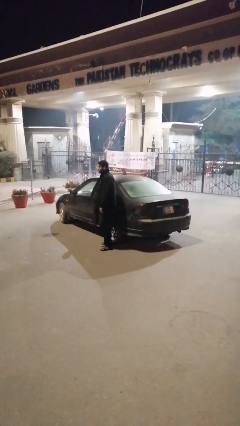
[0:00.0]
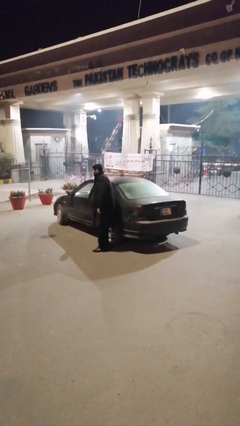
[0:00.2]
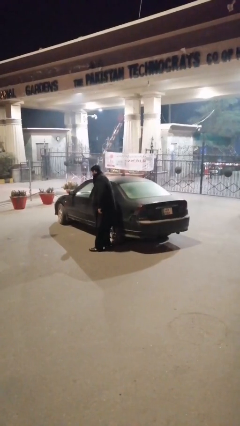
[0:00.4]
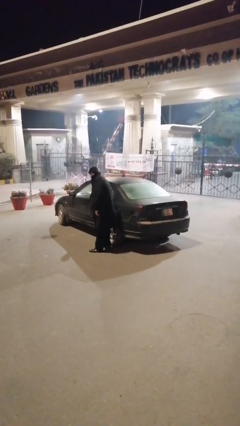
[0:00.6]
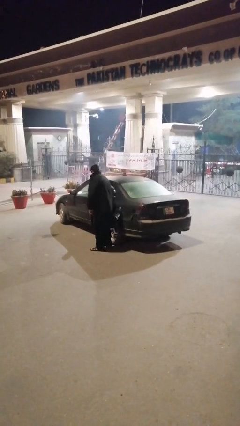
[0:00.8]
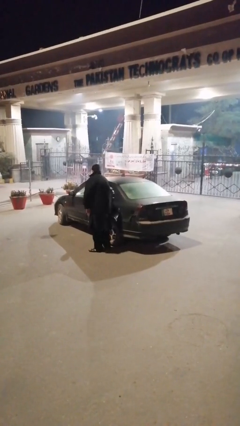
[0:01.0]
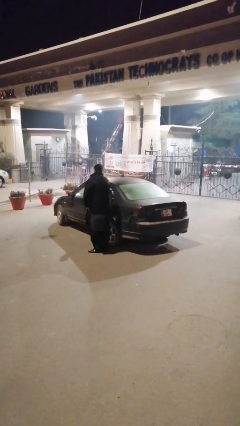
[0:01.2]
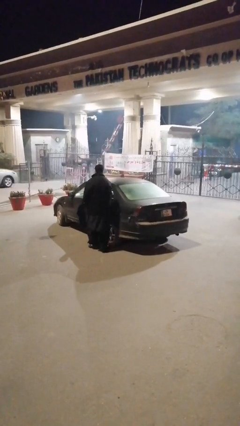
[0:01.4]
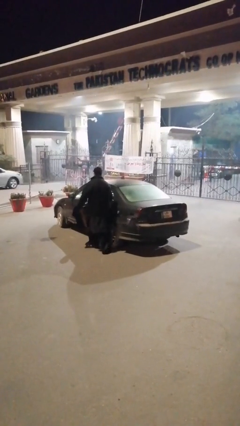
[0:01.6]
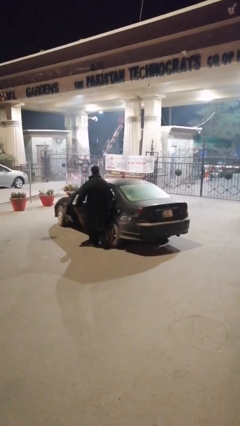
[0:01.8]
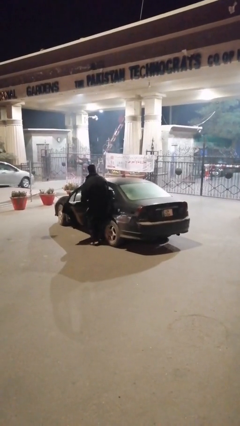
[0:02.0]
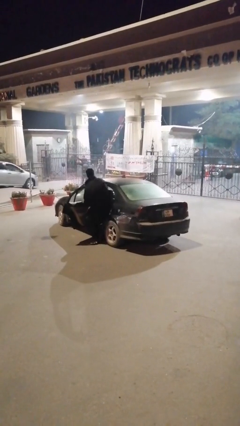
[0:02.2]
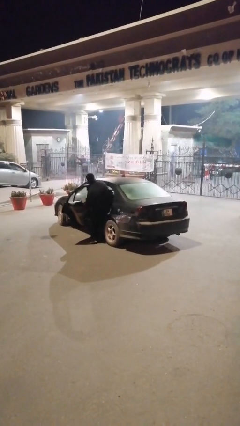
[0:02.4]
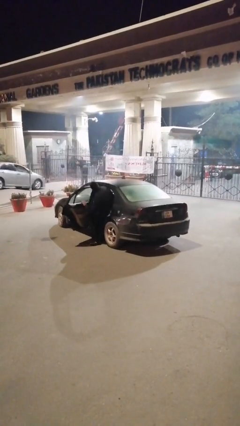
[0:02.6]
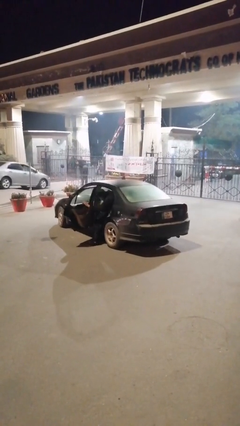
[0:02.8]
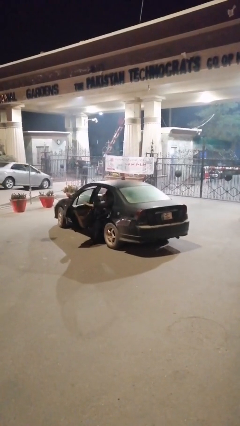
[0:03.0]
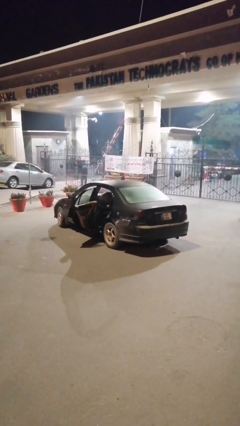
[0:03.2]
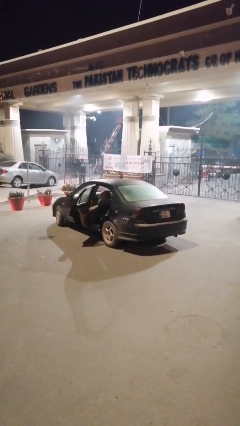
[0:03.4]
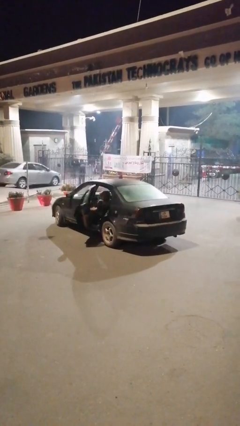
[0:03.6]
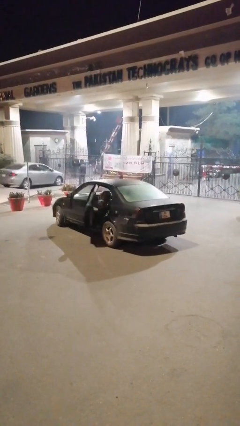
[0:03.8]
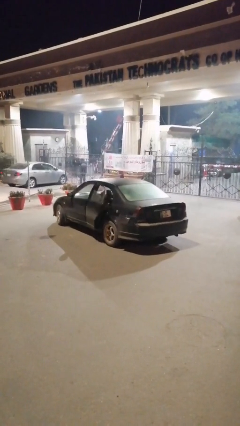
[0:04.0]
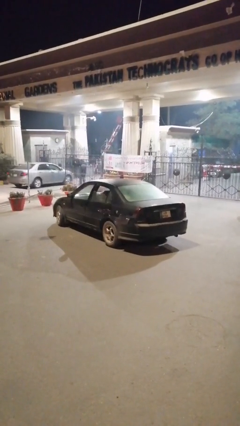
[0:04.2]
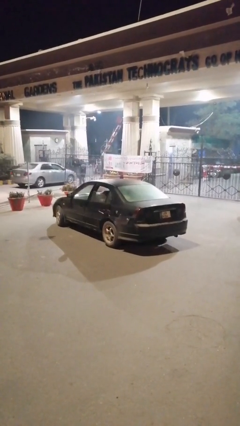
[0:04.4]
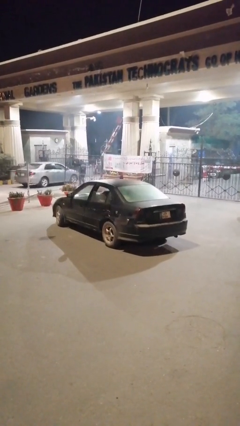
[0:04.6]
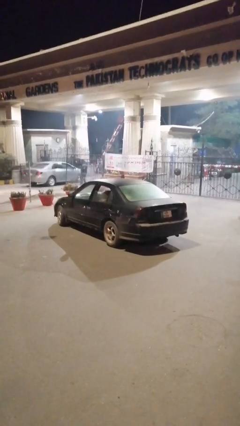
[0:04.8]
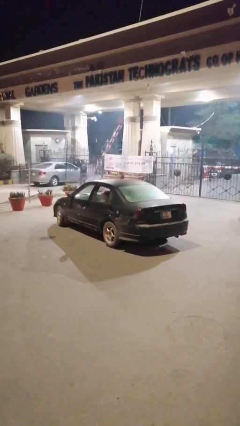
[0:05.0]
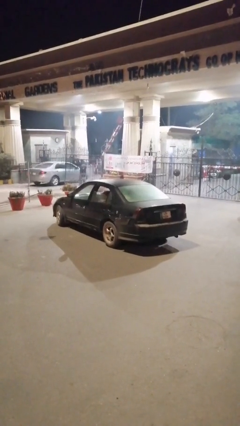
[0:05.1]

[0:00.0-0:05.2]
car picks up person

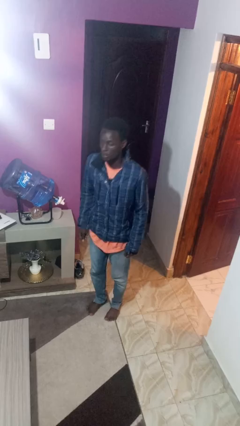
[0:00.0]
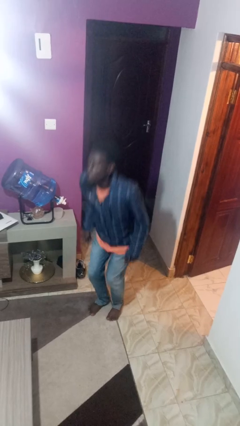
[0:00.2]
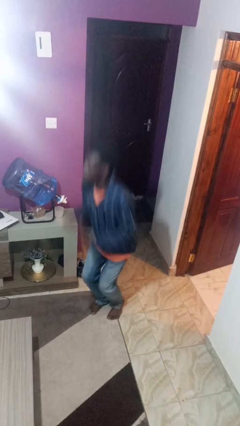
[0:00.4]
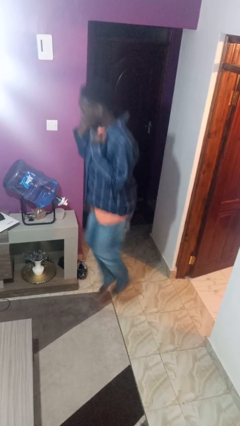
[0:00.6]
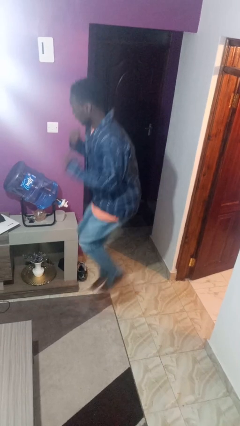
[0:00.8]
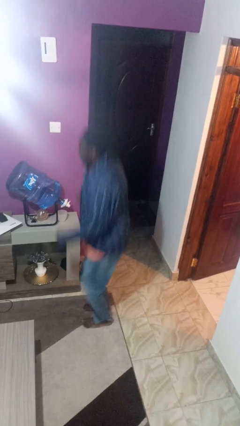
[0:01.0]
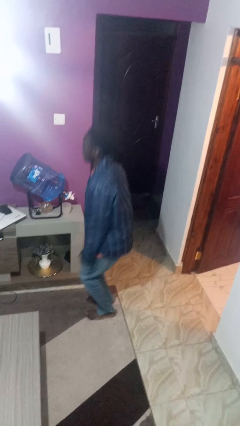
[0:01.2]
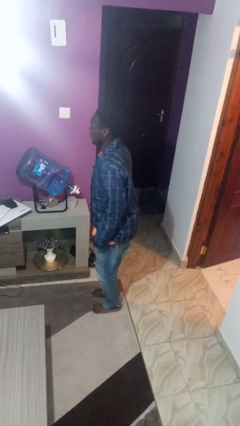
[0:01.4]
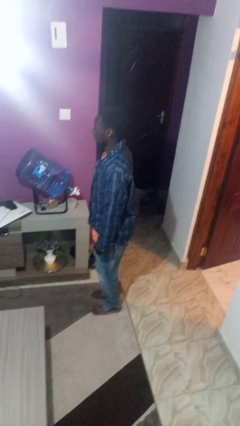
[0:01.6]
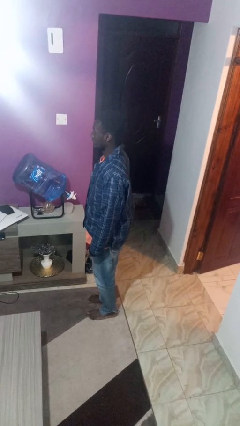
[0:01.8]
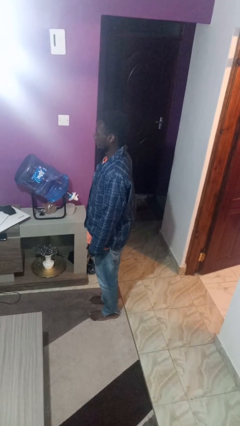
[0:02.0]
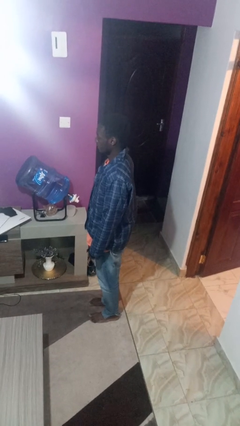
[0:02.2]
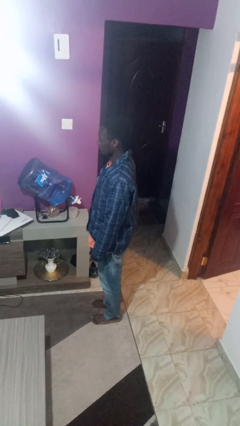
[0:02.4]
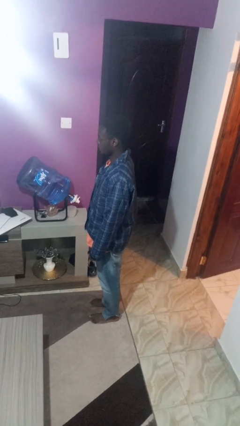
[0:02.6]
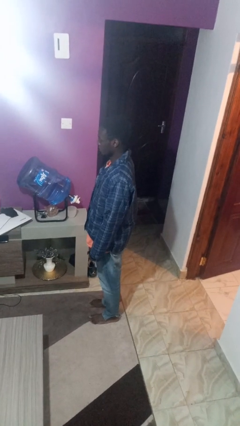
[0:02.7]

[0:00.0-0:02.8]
person jumps

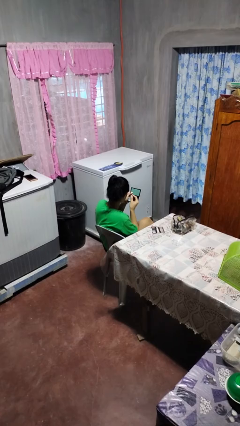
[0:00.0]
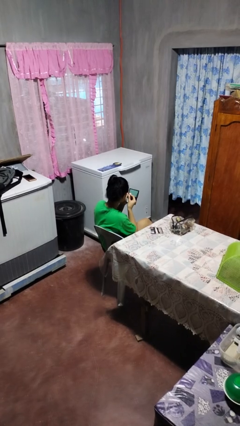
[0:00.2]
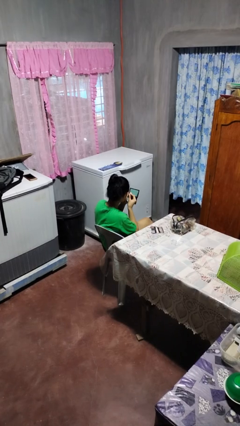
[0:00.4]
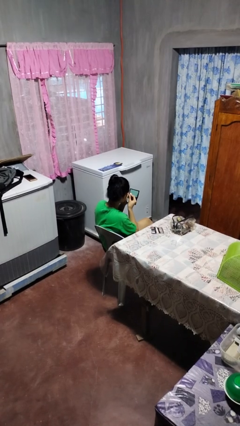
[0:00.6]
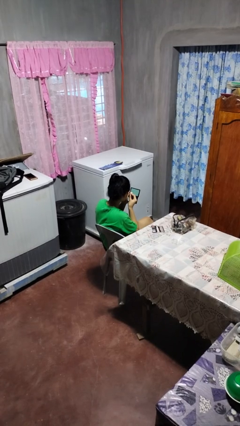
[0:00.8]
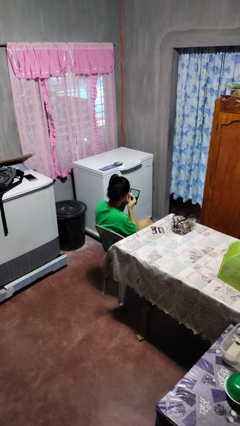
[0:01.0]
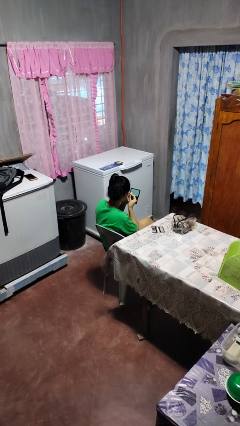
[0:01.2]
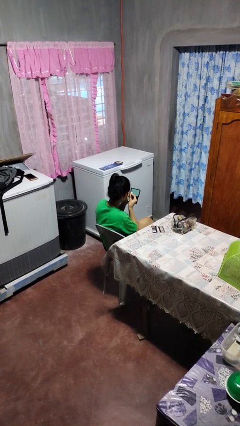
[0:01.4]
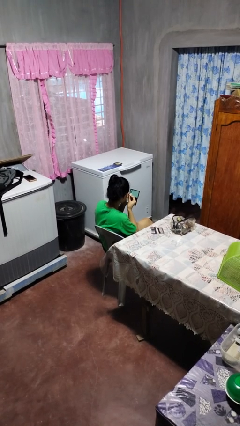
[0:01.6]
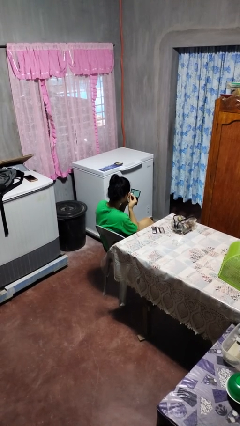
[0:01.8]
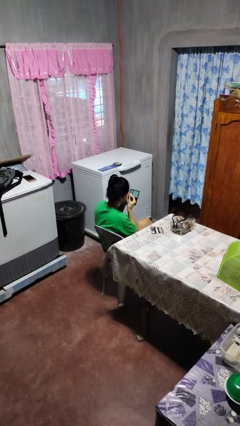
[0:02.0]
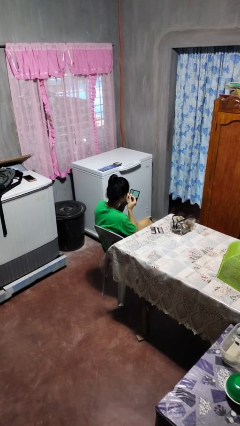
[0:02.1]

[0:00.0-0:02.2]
person applies eye makeup

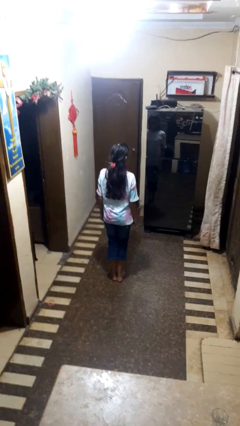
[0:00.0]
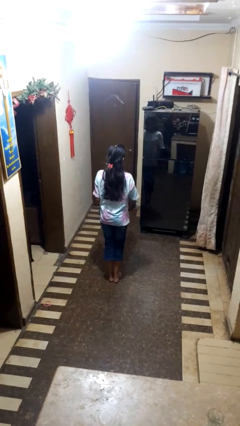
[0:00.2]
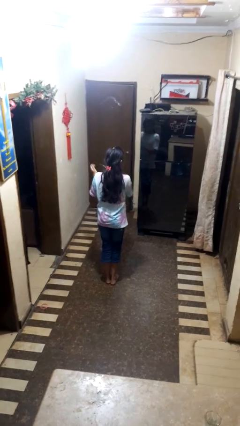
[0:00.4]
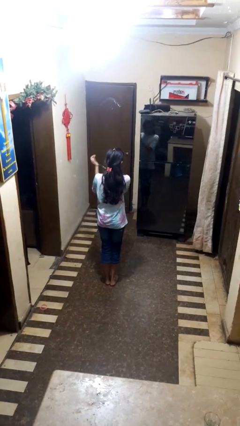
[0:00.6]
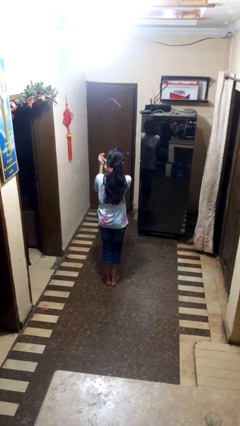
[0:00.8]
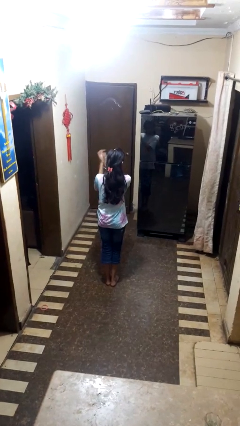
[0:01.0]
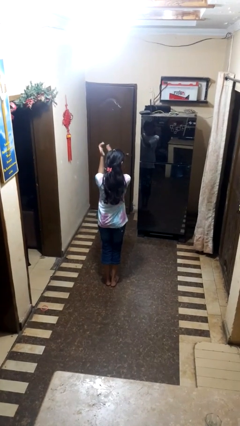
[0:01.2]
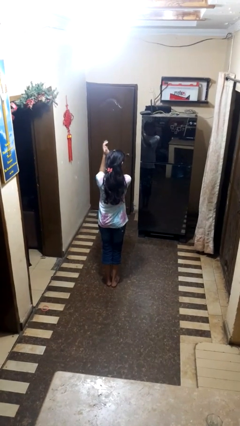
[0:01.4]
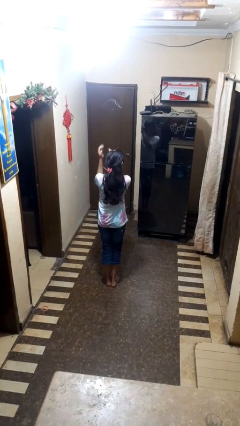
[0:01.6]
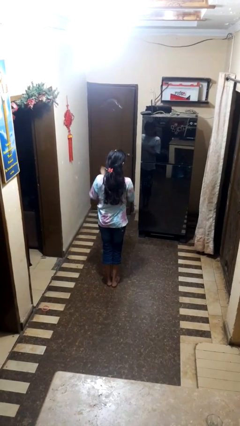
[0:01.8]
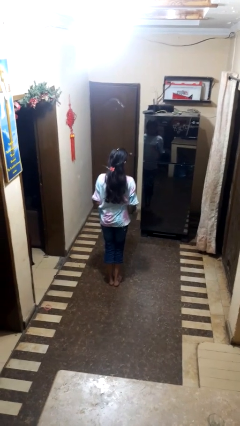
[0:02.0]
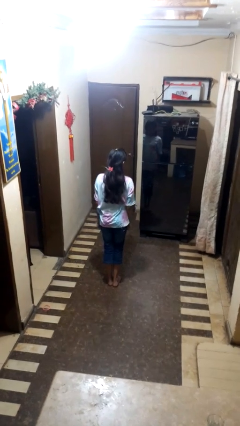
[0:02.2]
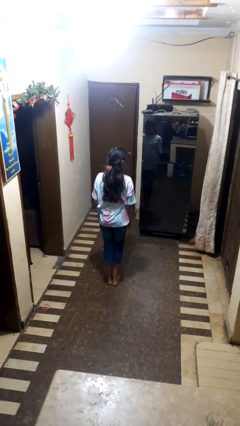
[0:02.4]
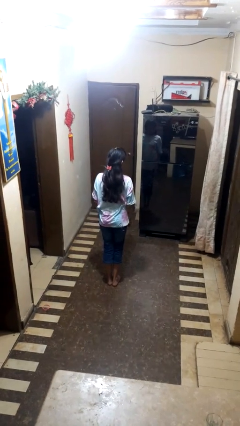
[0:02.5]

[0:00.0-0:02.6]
person claps hands

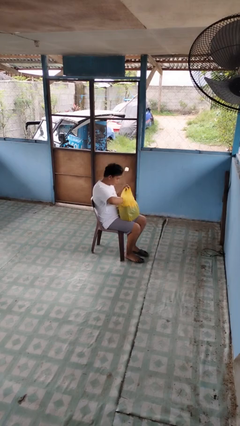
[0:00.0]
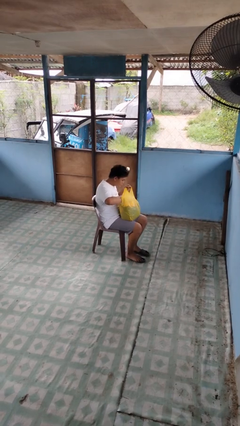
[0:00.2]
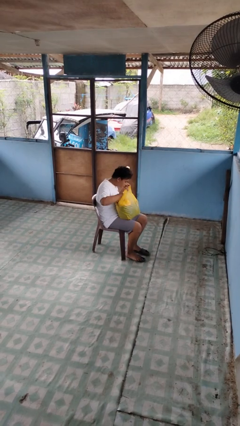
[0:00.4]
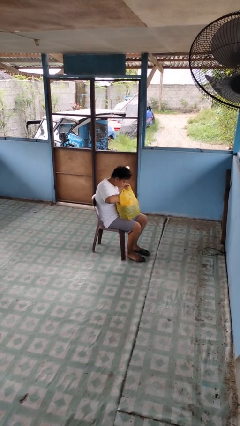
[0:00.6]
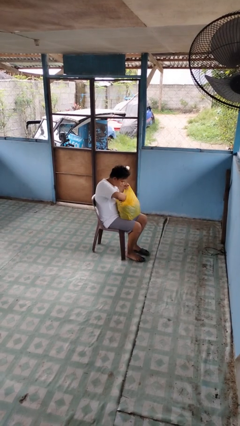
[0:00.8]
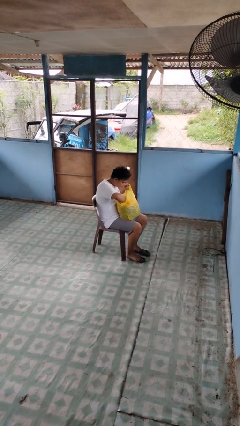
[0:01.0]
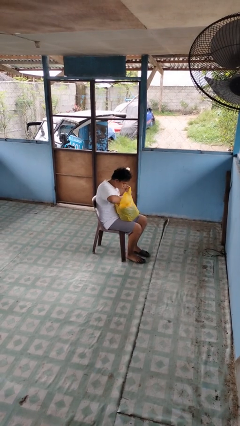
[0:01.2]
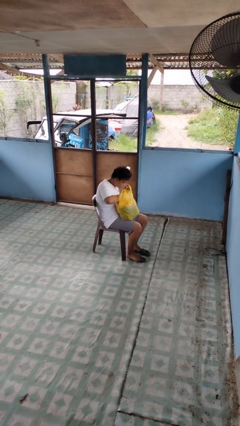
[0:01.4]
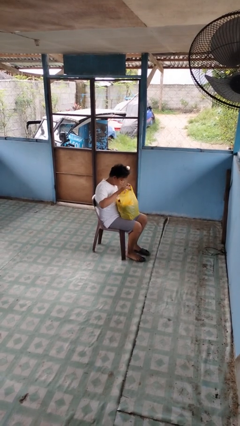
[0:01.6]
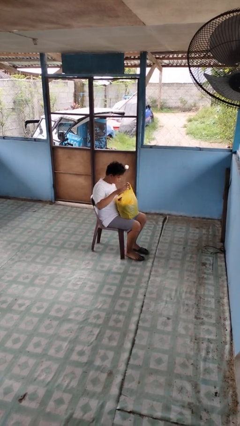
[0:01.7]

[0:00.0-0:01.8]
person searches in bag

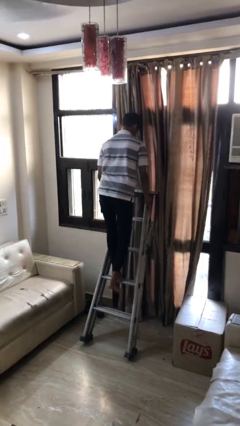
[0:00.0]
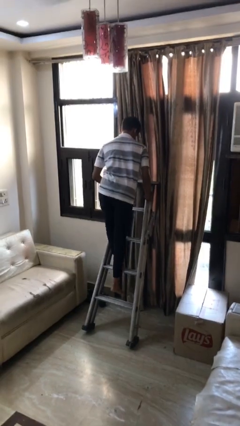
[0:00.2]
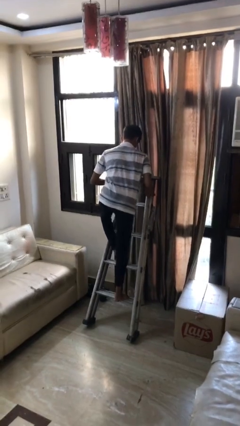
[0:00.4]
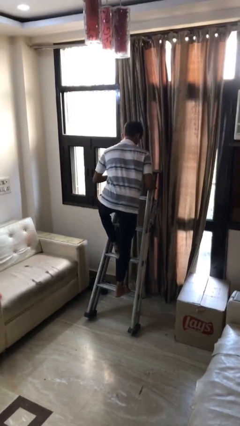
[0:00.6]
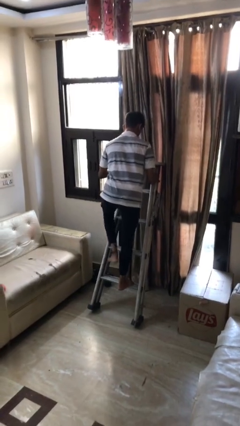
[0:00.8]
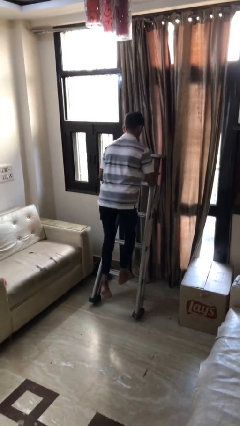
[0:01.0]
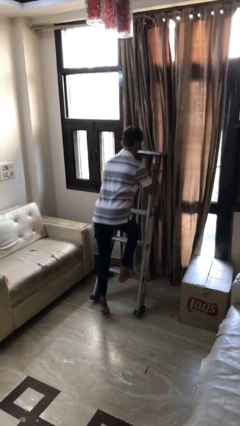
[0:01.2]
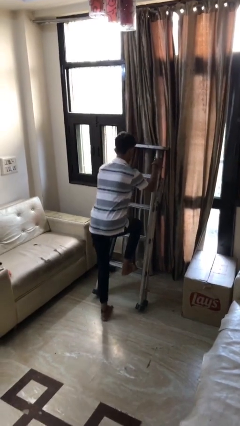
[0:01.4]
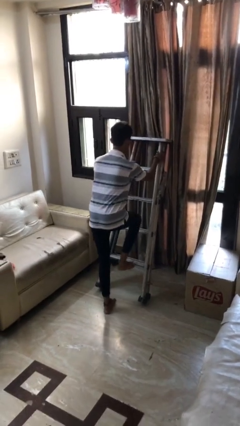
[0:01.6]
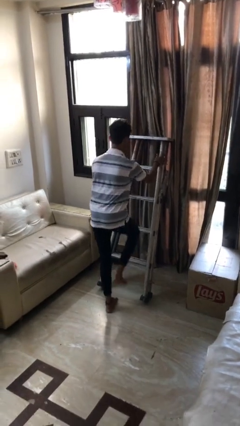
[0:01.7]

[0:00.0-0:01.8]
person climbs down ladder

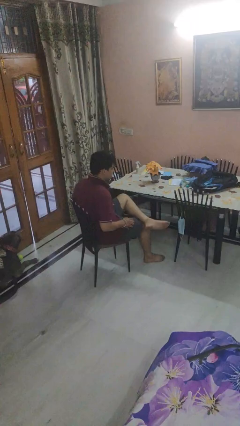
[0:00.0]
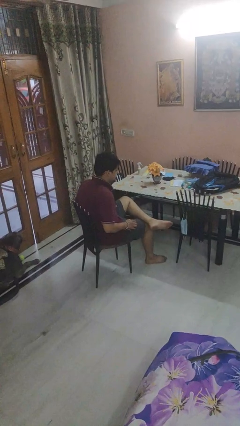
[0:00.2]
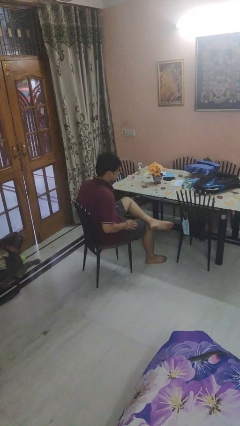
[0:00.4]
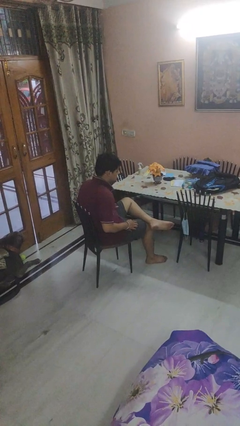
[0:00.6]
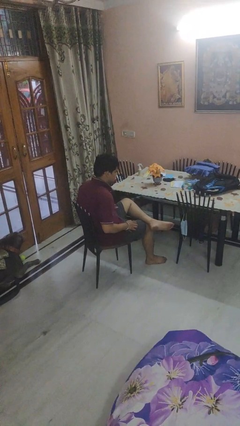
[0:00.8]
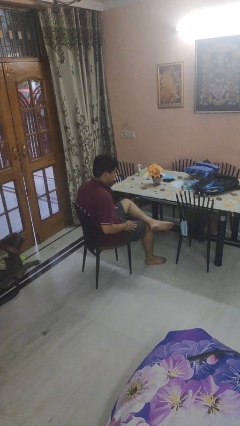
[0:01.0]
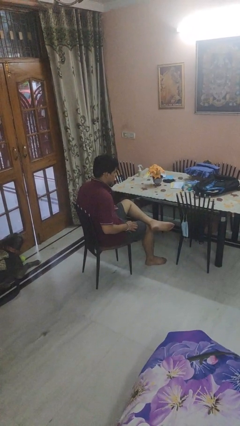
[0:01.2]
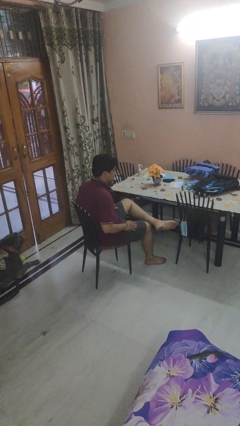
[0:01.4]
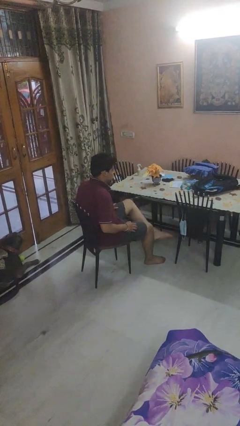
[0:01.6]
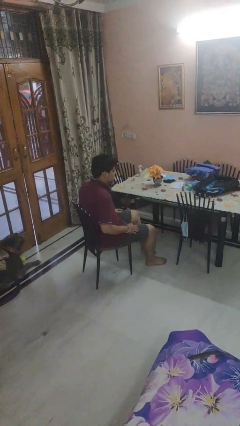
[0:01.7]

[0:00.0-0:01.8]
person crosses legs
